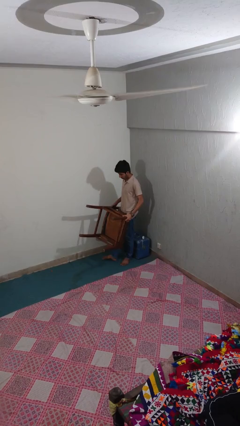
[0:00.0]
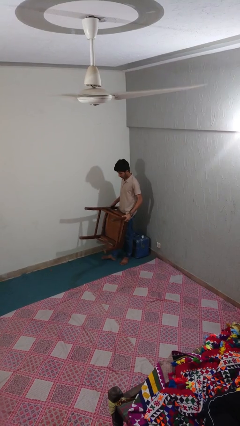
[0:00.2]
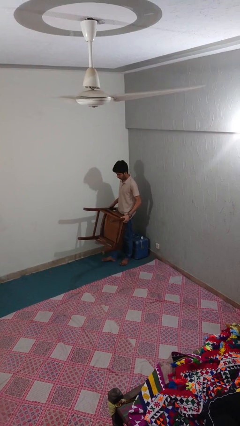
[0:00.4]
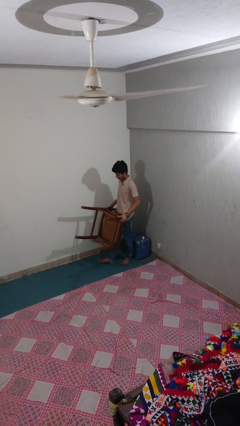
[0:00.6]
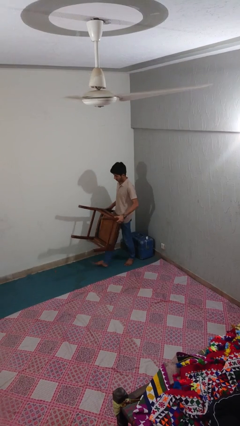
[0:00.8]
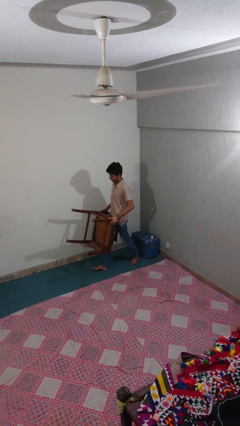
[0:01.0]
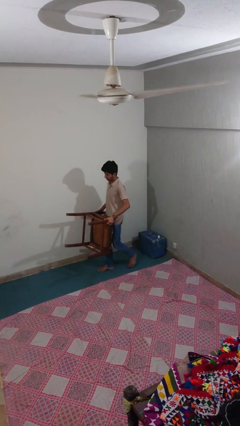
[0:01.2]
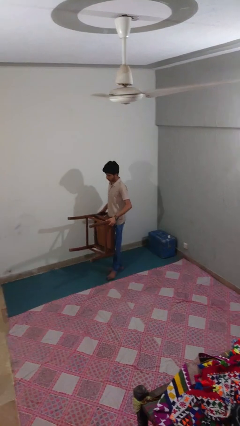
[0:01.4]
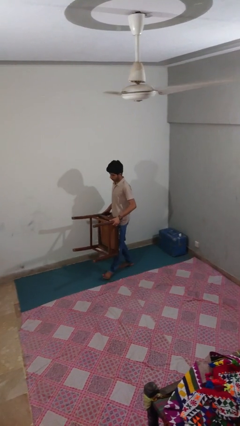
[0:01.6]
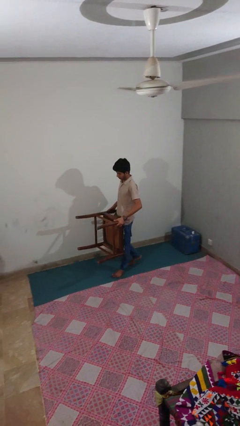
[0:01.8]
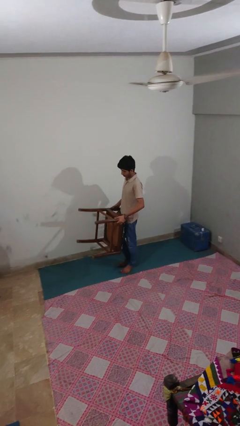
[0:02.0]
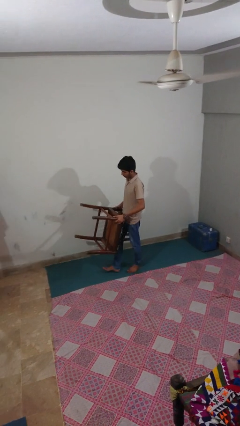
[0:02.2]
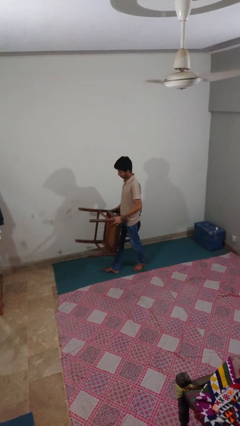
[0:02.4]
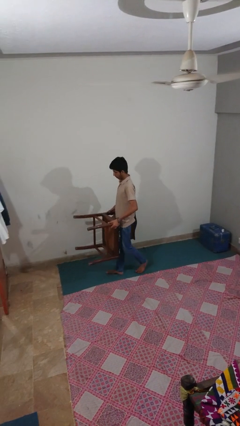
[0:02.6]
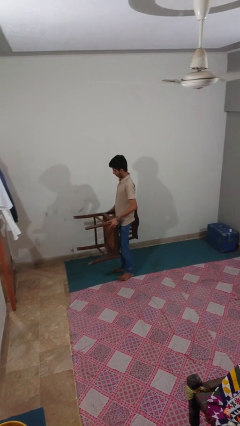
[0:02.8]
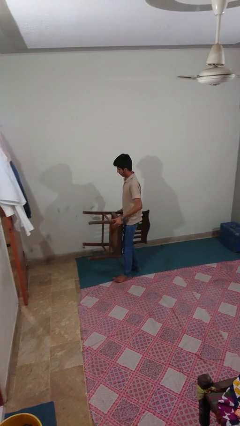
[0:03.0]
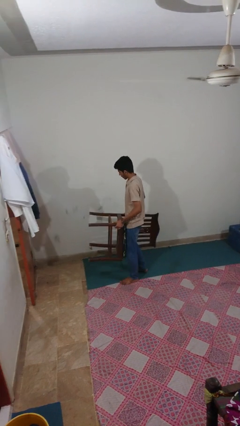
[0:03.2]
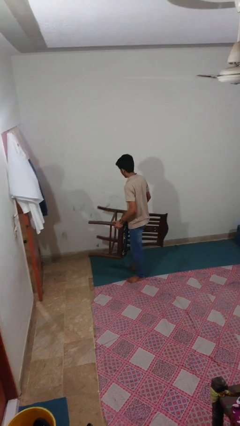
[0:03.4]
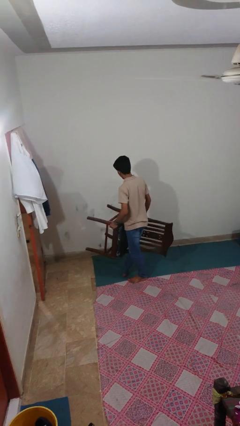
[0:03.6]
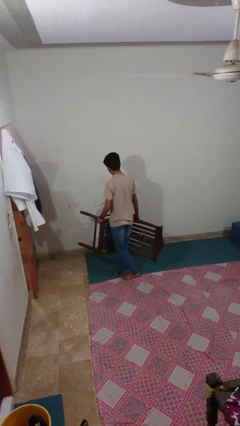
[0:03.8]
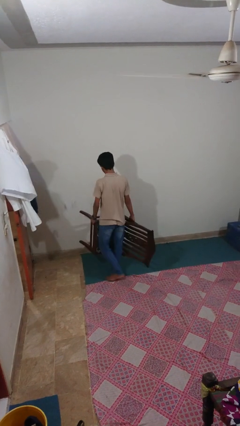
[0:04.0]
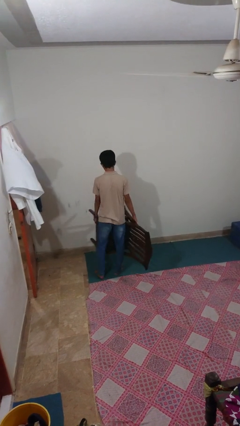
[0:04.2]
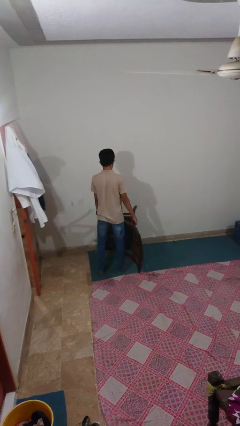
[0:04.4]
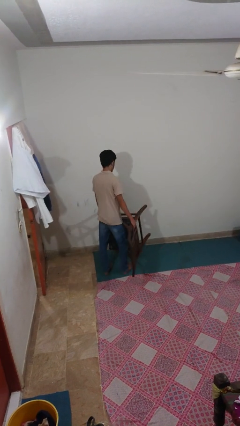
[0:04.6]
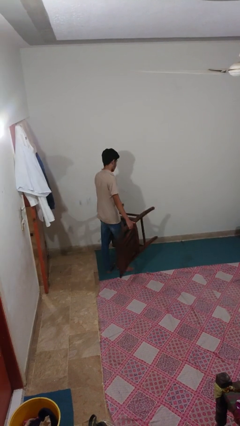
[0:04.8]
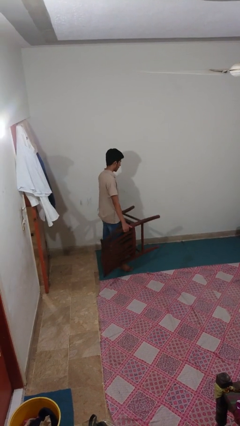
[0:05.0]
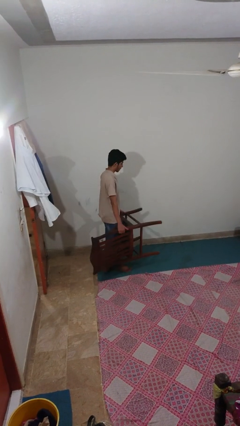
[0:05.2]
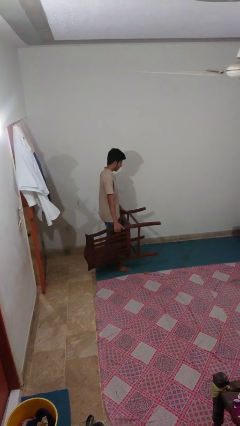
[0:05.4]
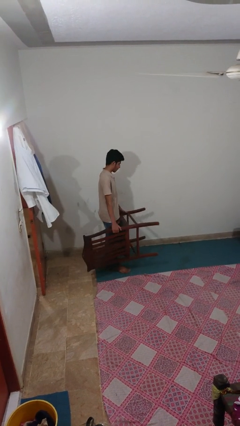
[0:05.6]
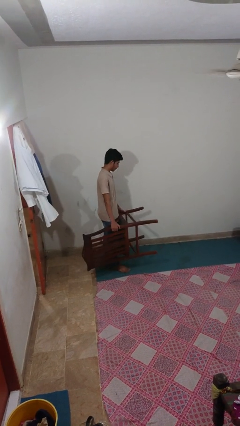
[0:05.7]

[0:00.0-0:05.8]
person carries furniture

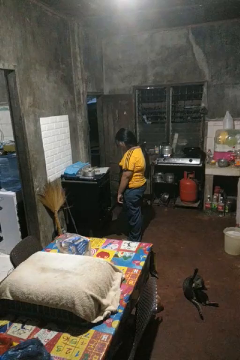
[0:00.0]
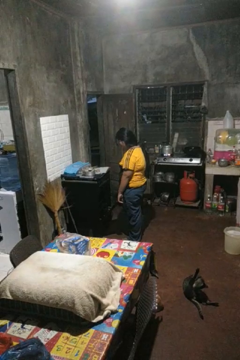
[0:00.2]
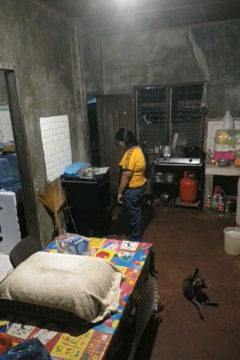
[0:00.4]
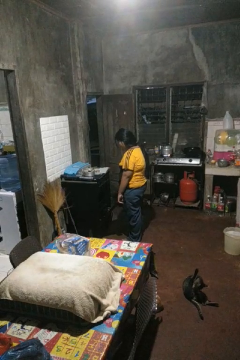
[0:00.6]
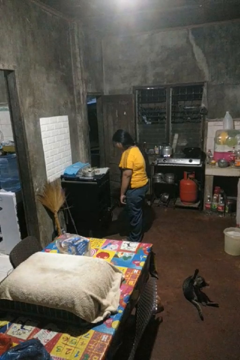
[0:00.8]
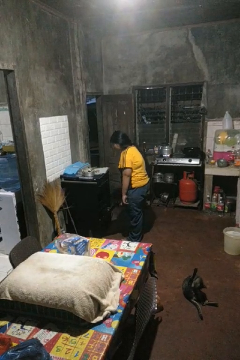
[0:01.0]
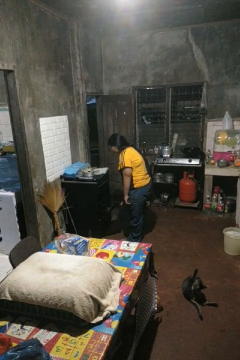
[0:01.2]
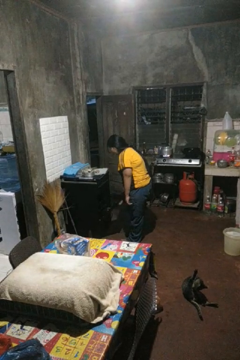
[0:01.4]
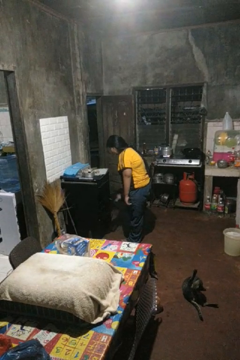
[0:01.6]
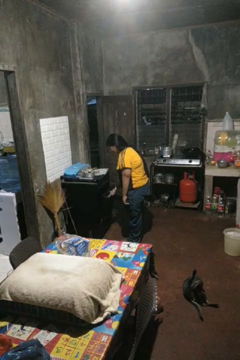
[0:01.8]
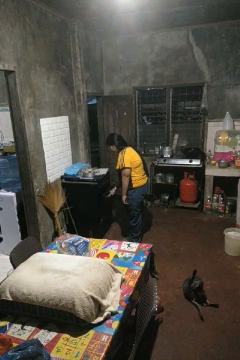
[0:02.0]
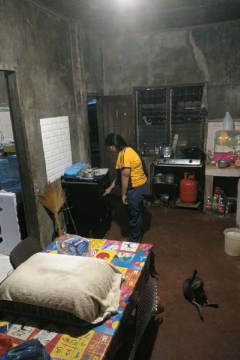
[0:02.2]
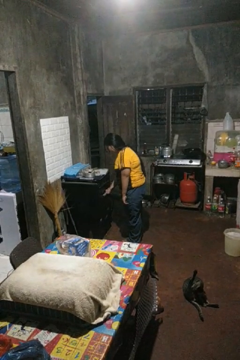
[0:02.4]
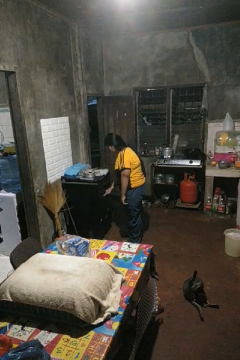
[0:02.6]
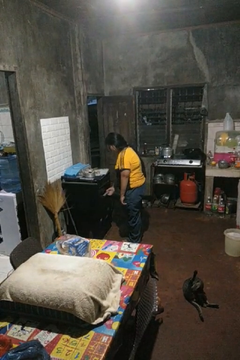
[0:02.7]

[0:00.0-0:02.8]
person closes oven door

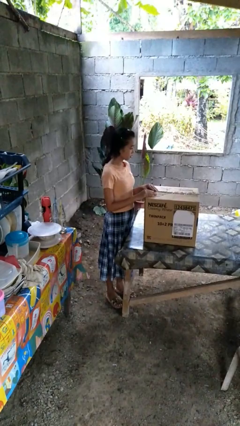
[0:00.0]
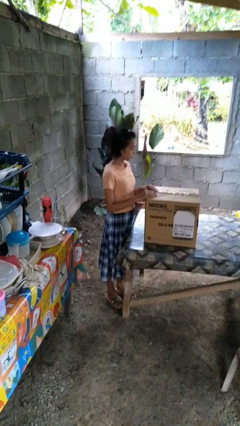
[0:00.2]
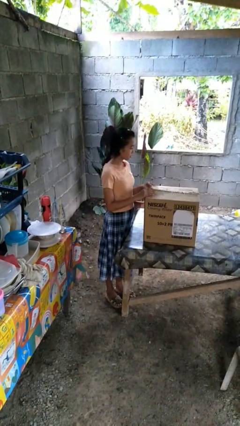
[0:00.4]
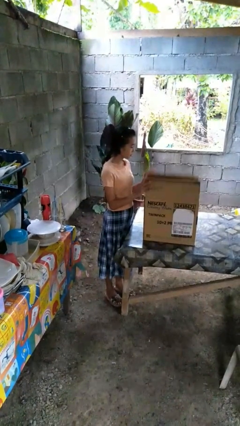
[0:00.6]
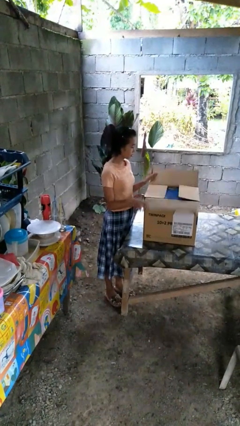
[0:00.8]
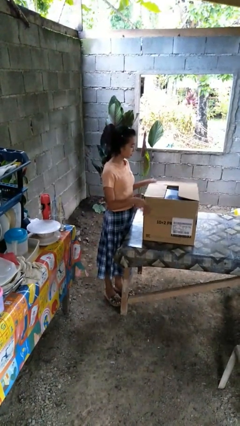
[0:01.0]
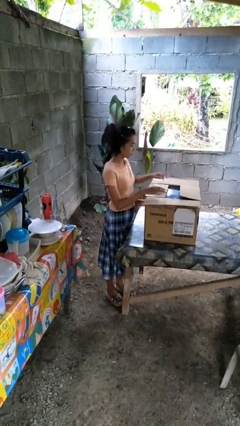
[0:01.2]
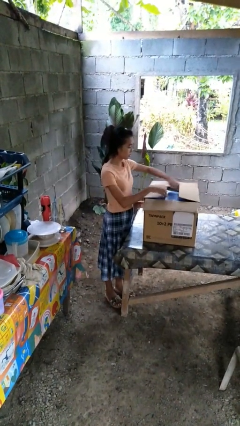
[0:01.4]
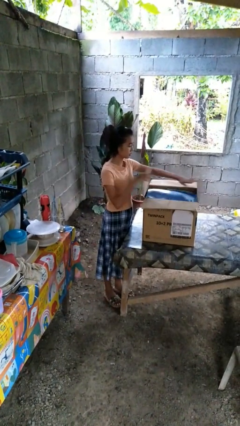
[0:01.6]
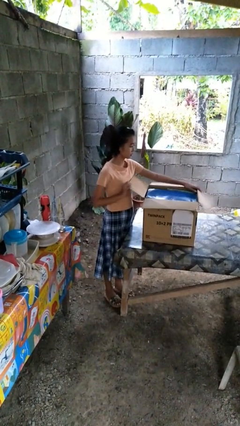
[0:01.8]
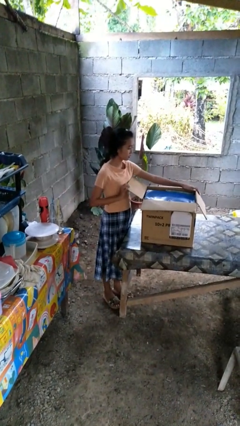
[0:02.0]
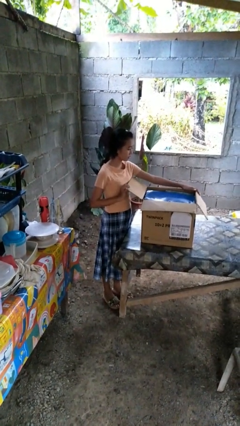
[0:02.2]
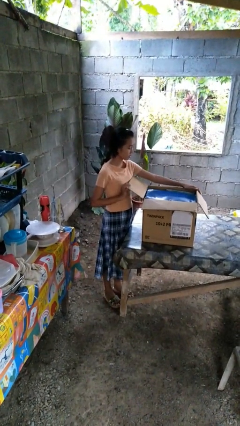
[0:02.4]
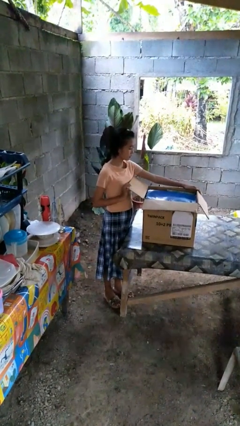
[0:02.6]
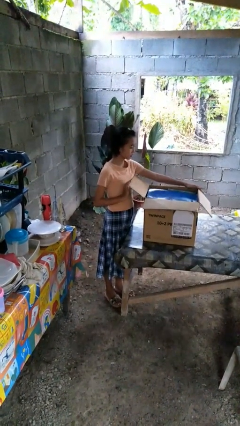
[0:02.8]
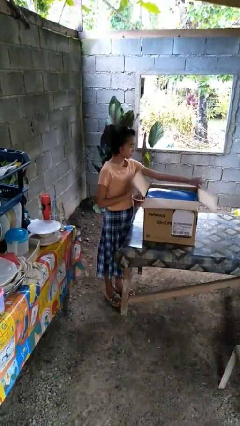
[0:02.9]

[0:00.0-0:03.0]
person opens box

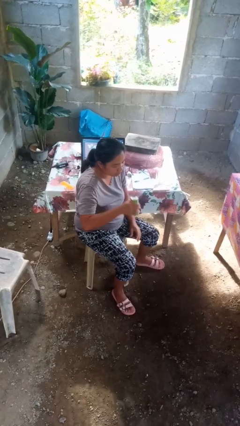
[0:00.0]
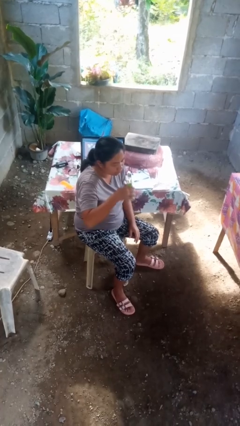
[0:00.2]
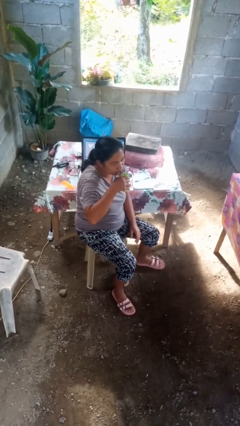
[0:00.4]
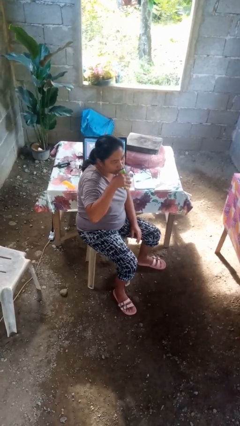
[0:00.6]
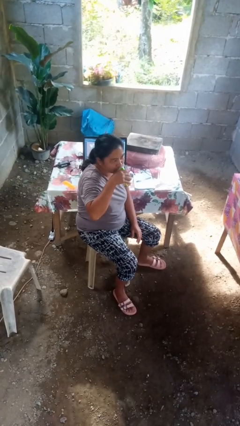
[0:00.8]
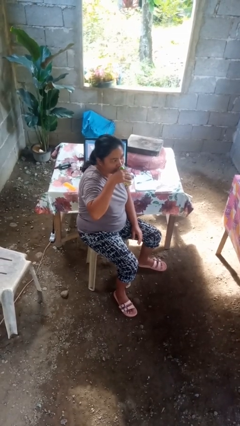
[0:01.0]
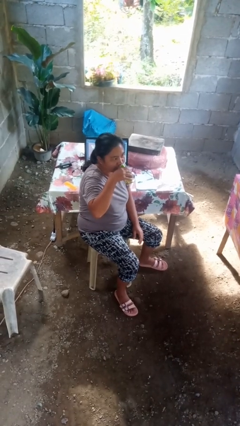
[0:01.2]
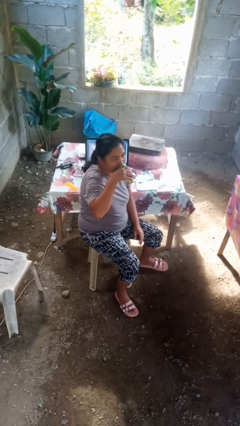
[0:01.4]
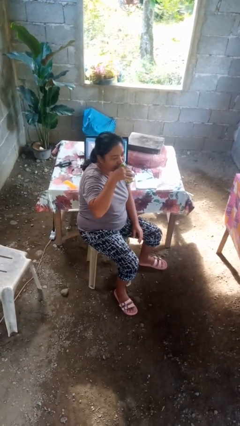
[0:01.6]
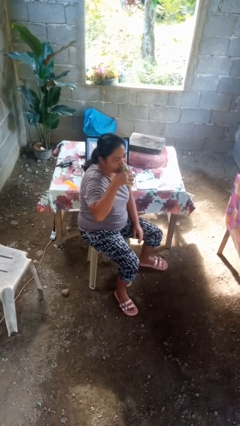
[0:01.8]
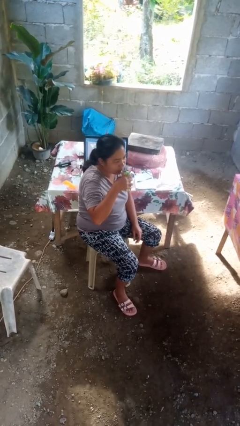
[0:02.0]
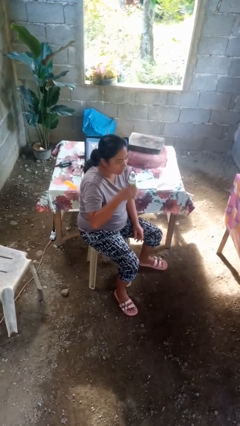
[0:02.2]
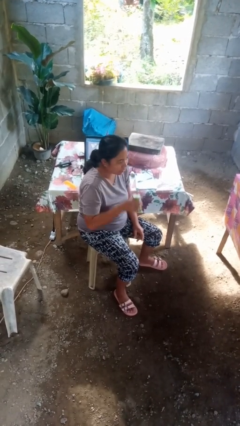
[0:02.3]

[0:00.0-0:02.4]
person drinks from beverage can

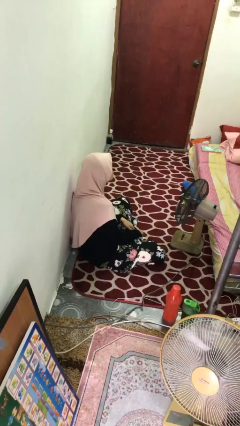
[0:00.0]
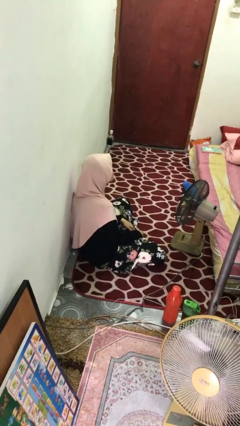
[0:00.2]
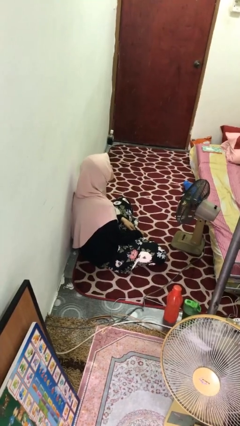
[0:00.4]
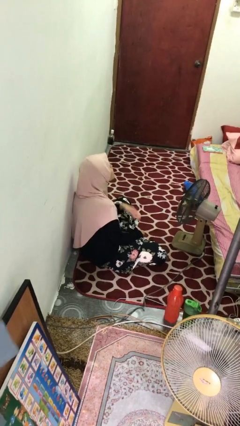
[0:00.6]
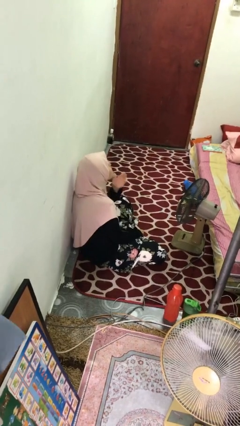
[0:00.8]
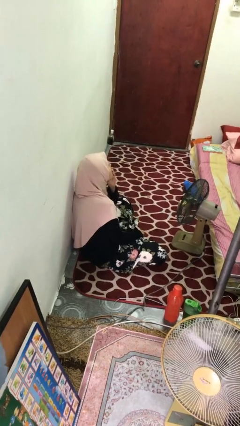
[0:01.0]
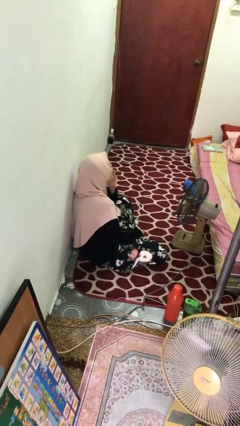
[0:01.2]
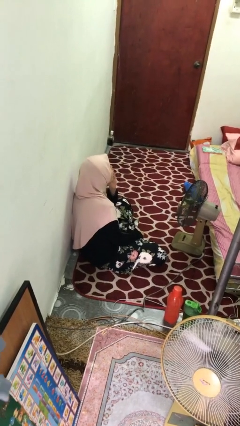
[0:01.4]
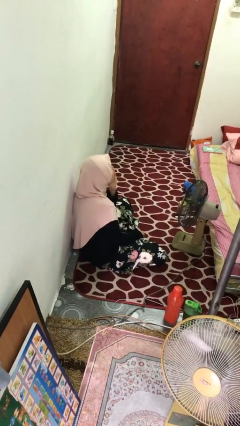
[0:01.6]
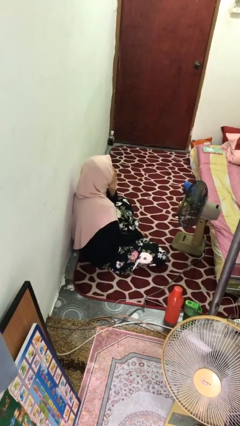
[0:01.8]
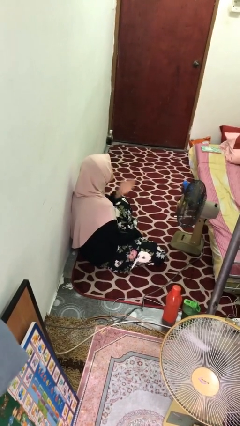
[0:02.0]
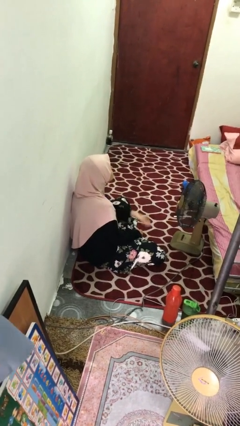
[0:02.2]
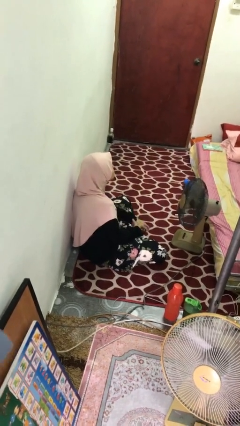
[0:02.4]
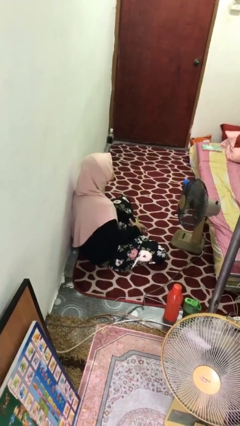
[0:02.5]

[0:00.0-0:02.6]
person yawns

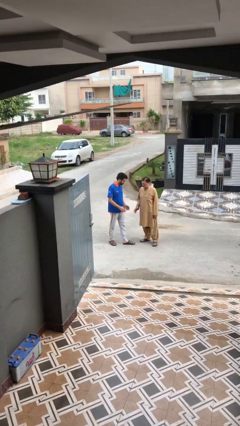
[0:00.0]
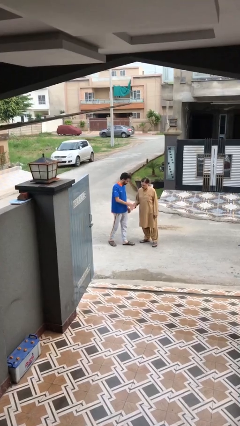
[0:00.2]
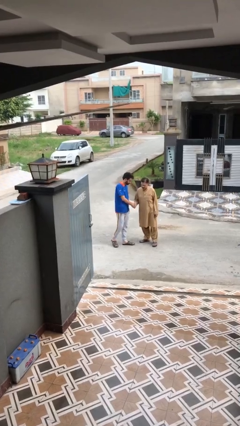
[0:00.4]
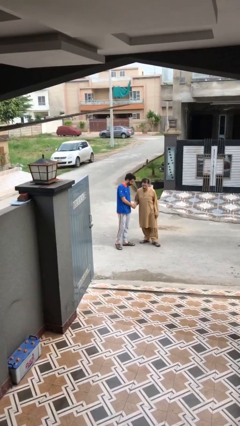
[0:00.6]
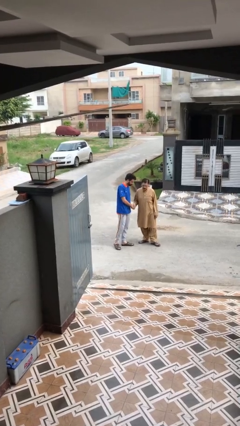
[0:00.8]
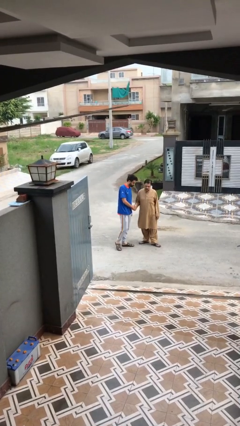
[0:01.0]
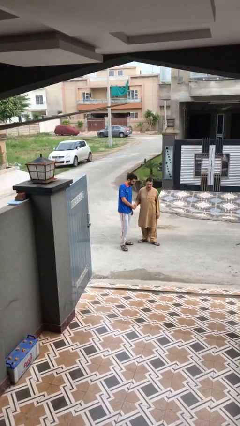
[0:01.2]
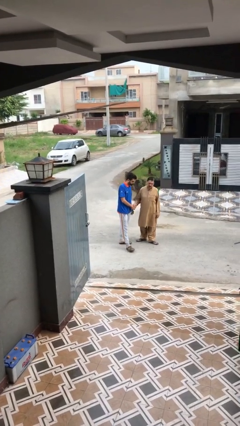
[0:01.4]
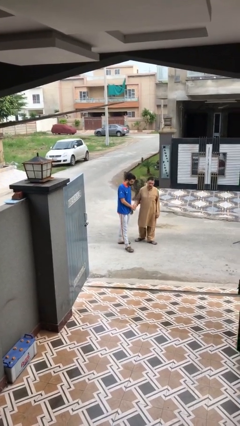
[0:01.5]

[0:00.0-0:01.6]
person shakes hand

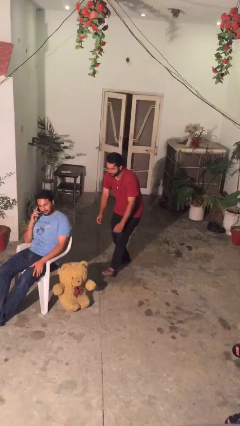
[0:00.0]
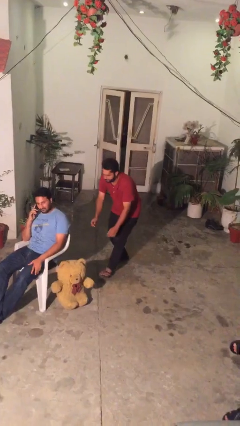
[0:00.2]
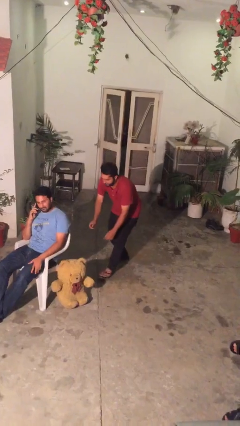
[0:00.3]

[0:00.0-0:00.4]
person steals object from person
